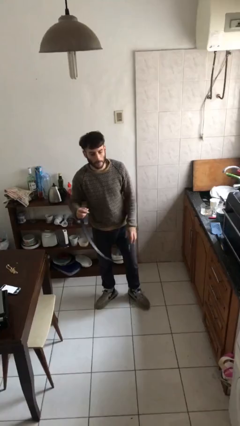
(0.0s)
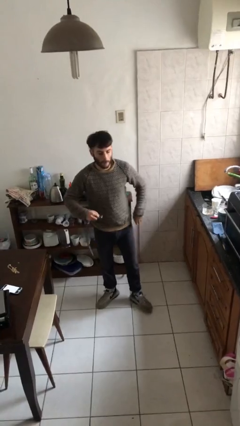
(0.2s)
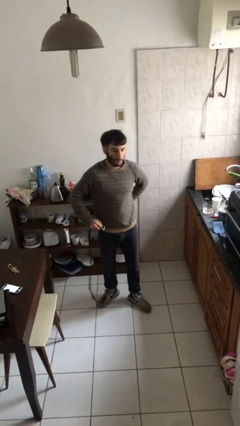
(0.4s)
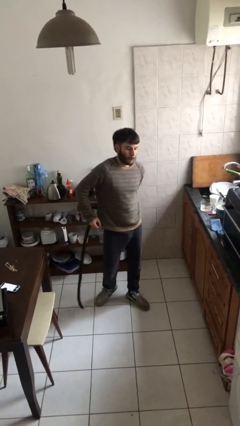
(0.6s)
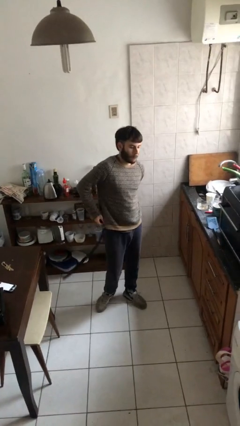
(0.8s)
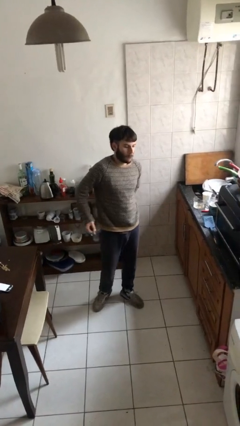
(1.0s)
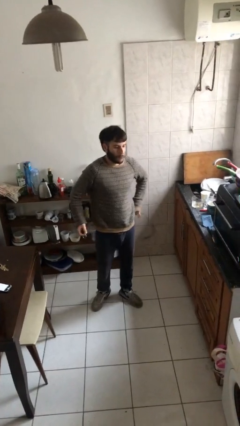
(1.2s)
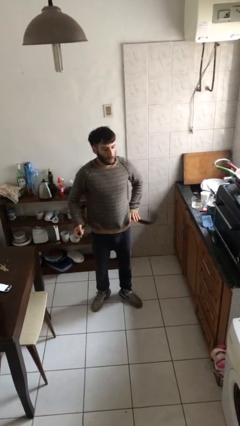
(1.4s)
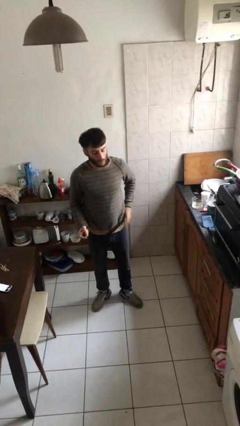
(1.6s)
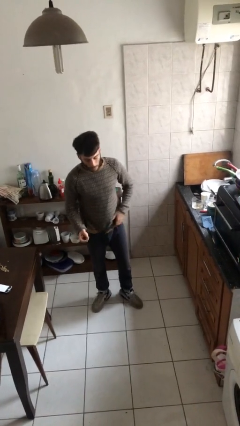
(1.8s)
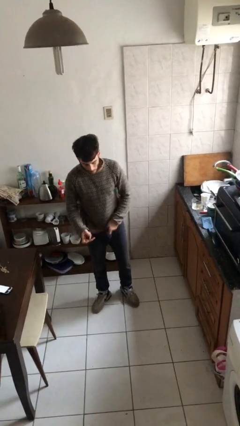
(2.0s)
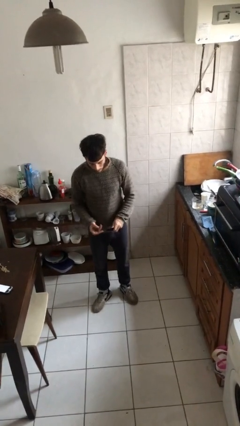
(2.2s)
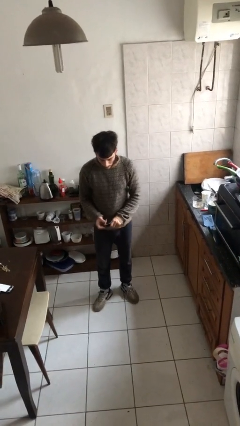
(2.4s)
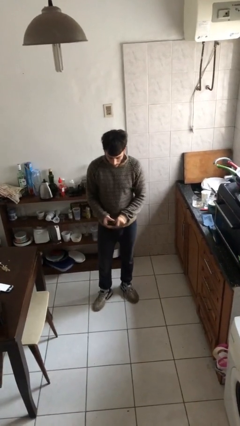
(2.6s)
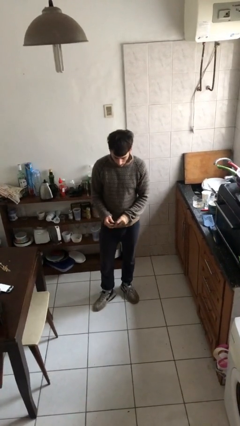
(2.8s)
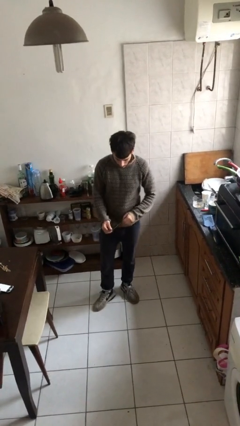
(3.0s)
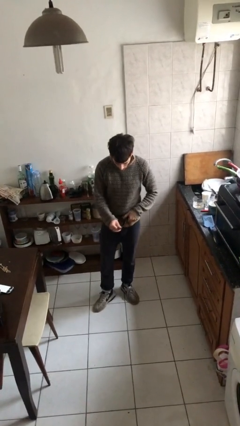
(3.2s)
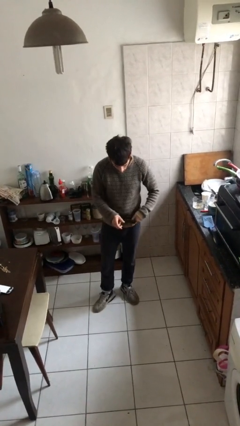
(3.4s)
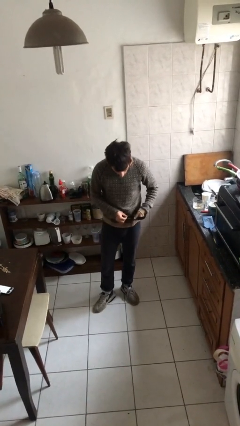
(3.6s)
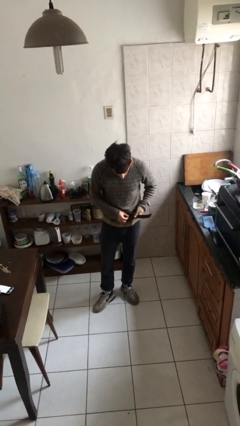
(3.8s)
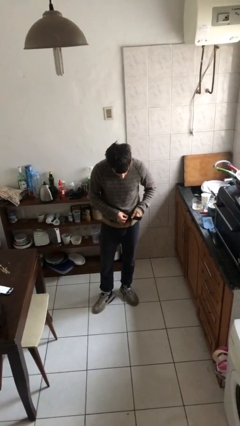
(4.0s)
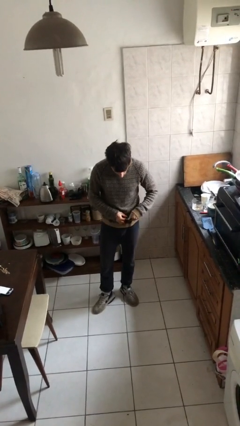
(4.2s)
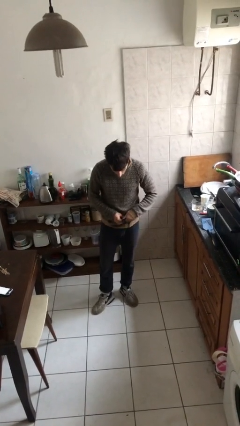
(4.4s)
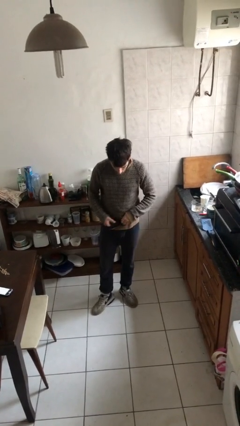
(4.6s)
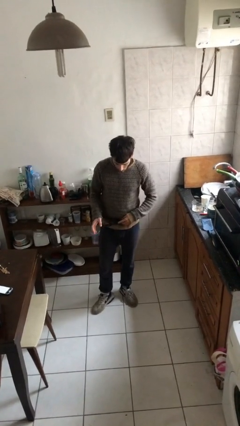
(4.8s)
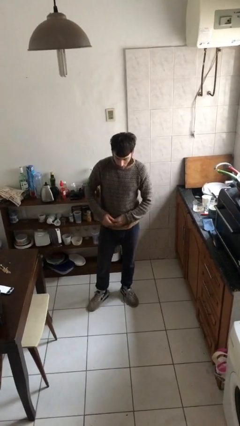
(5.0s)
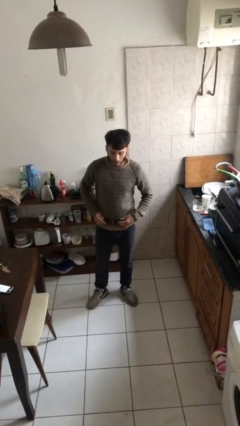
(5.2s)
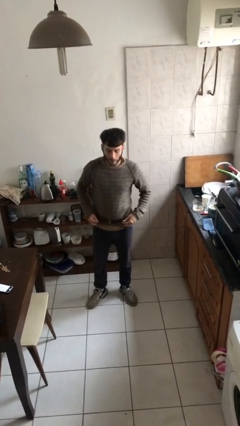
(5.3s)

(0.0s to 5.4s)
person puts on belt

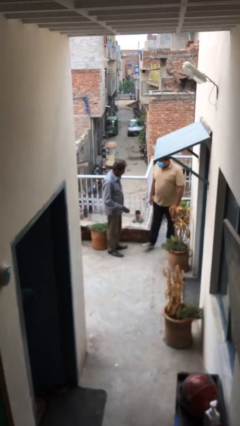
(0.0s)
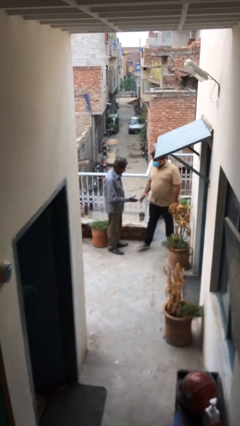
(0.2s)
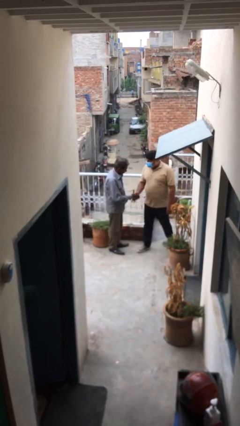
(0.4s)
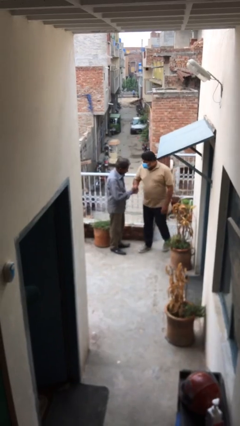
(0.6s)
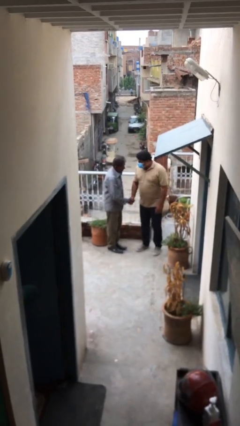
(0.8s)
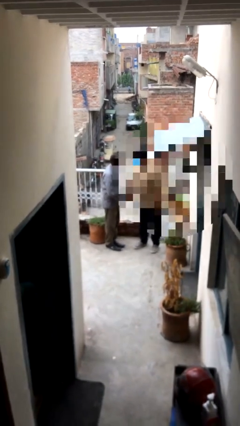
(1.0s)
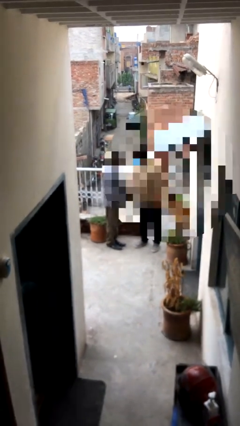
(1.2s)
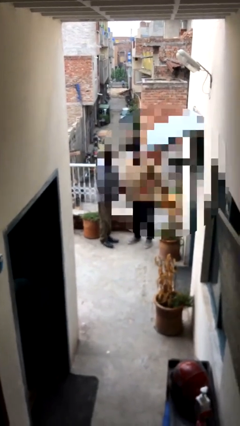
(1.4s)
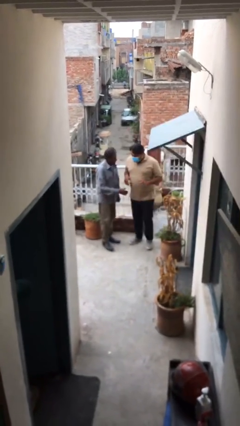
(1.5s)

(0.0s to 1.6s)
person shakes hand

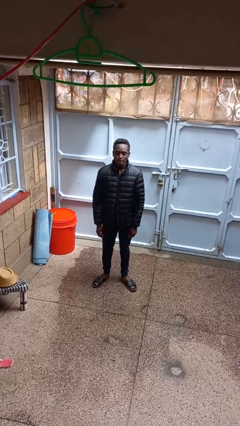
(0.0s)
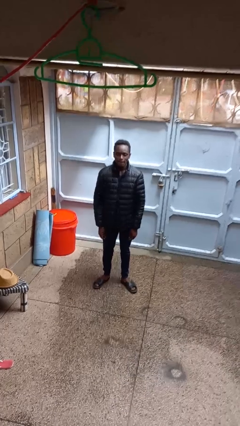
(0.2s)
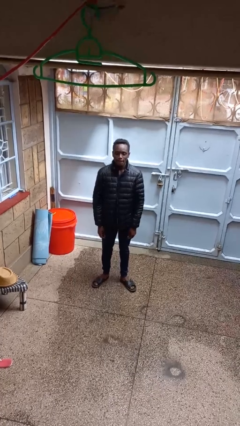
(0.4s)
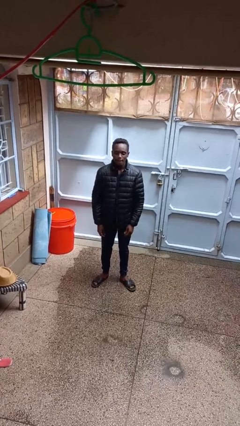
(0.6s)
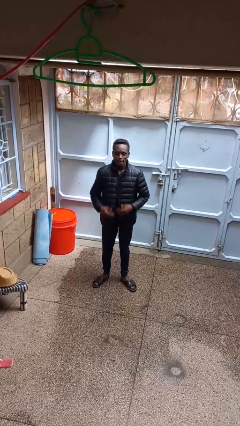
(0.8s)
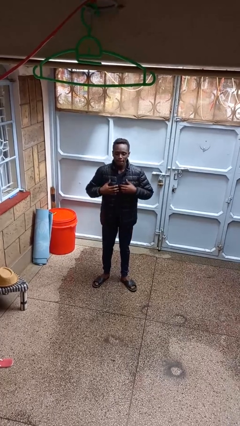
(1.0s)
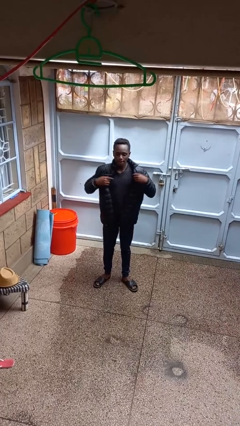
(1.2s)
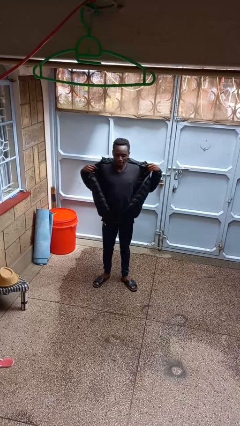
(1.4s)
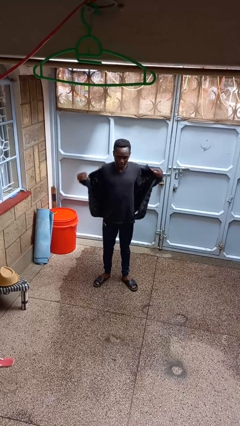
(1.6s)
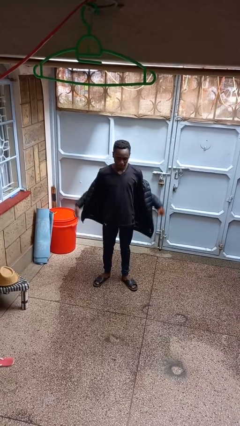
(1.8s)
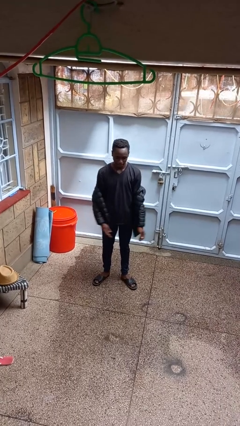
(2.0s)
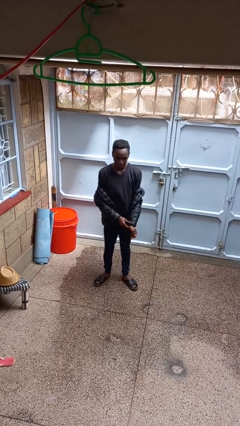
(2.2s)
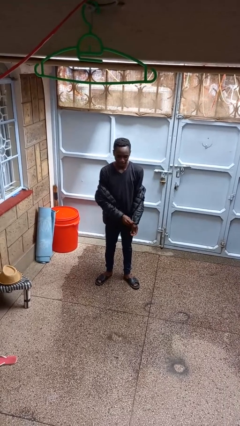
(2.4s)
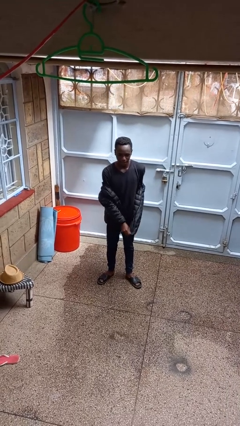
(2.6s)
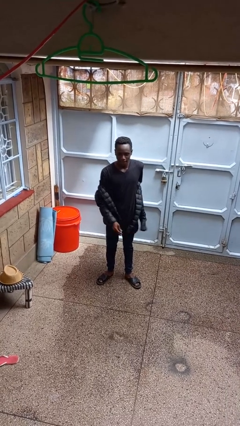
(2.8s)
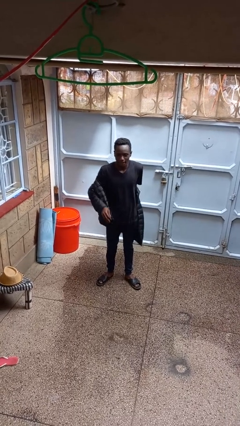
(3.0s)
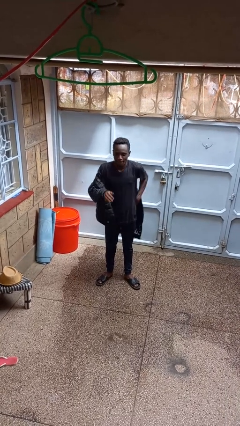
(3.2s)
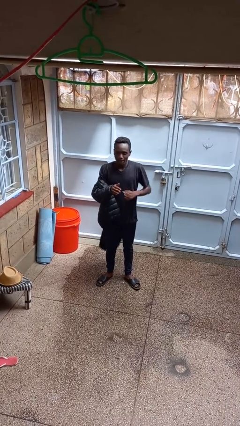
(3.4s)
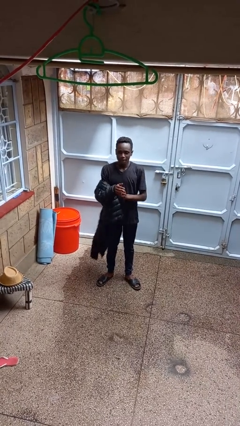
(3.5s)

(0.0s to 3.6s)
person takes off jacket

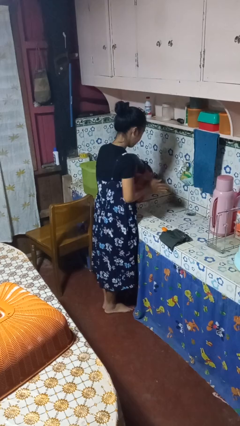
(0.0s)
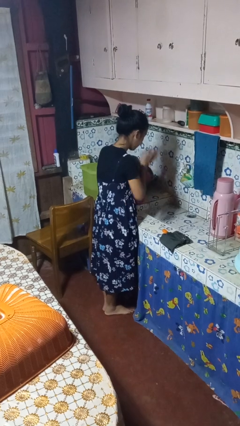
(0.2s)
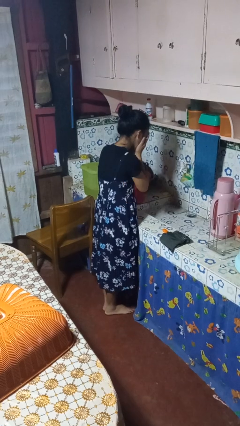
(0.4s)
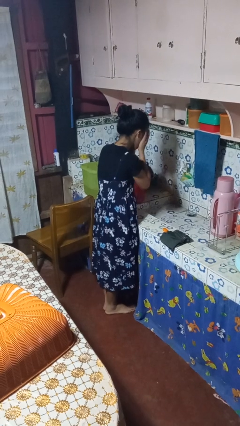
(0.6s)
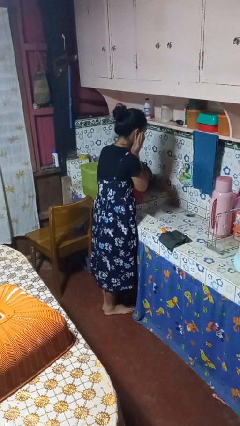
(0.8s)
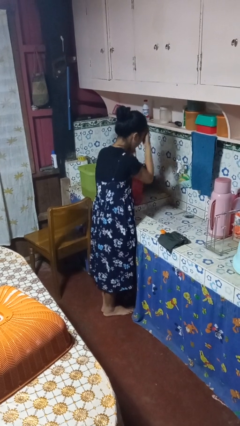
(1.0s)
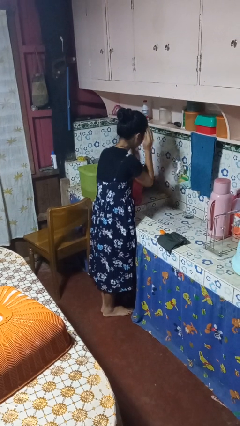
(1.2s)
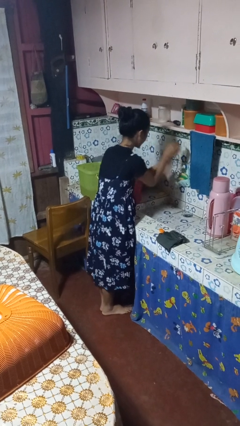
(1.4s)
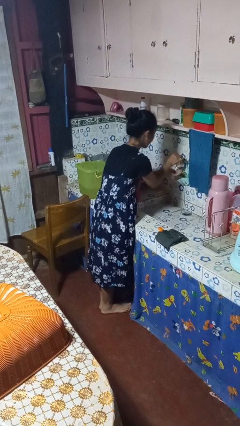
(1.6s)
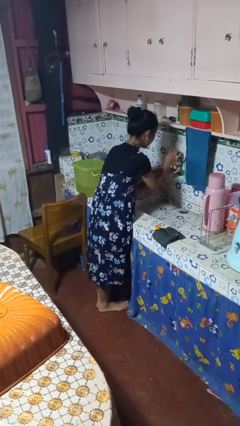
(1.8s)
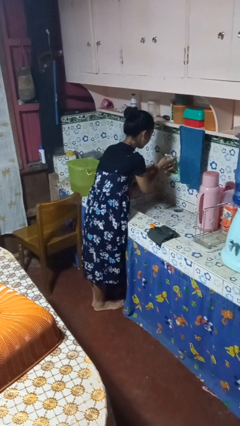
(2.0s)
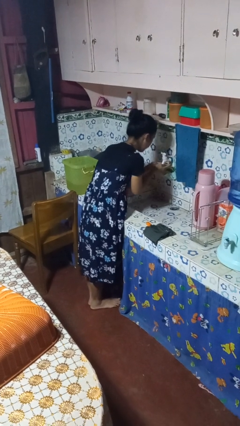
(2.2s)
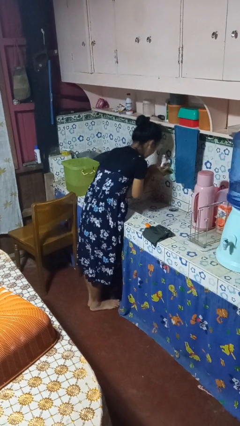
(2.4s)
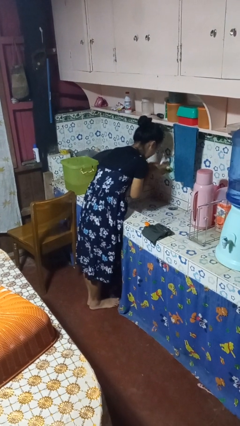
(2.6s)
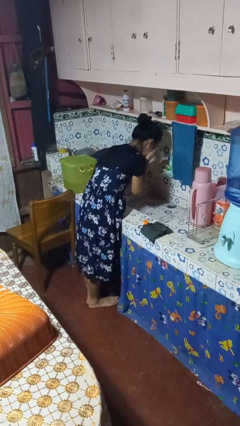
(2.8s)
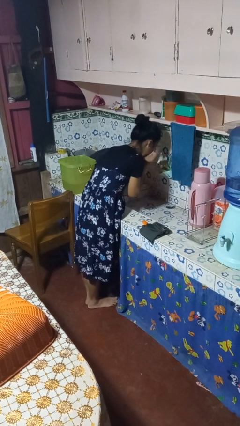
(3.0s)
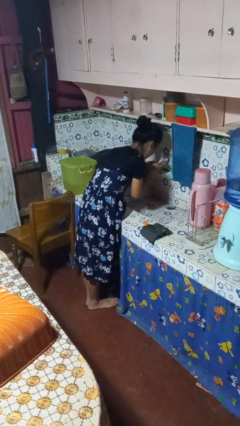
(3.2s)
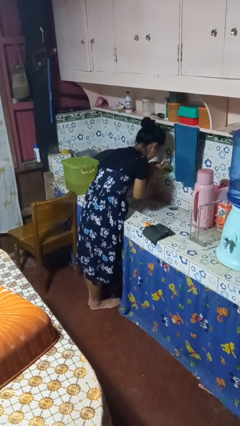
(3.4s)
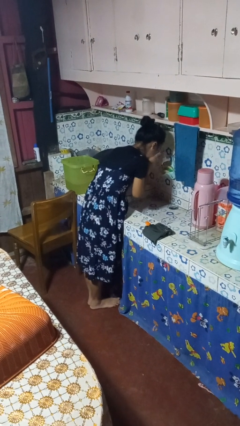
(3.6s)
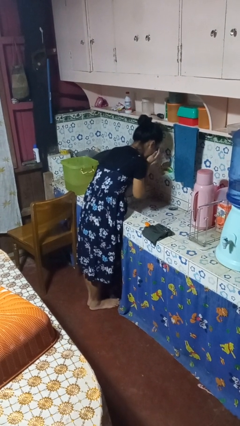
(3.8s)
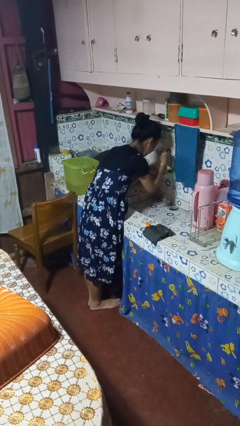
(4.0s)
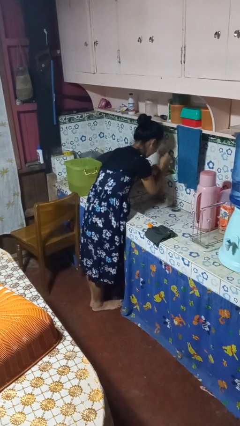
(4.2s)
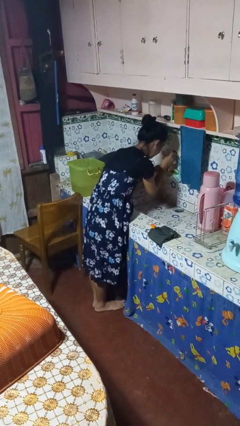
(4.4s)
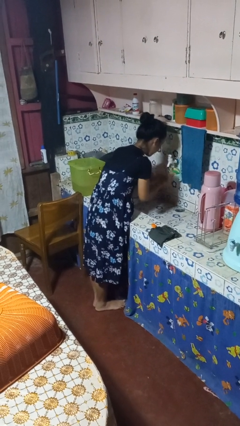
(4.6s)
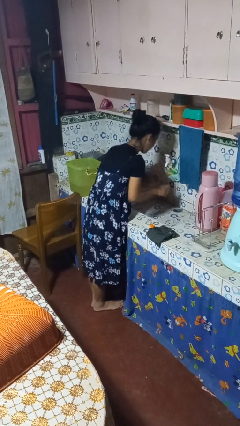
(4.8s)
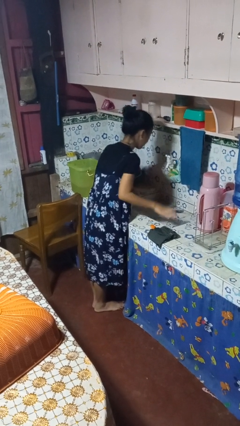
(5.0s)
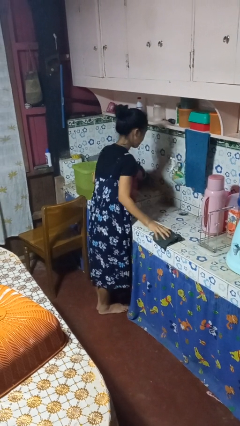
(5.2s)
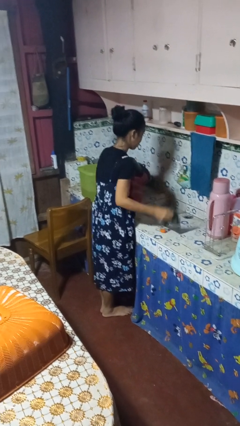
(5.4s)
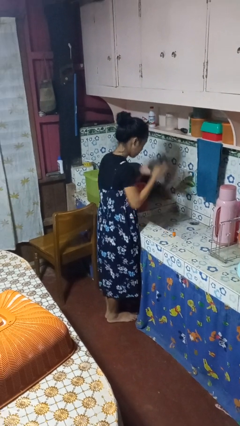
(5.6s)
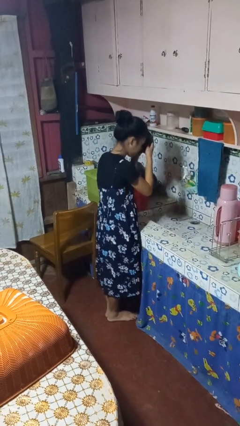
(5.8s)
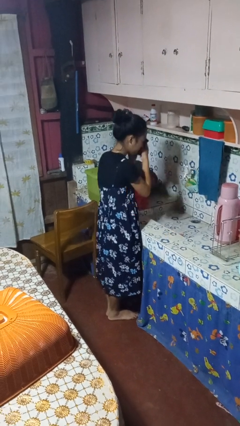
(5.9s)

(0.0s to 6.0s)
person washes face

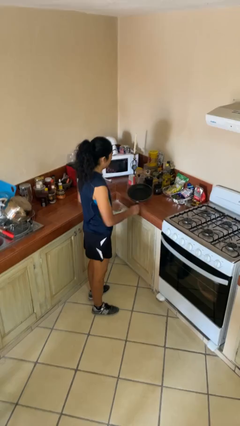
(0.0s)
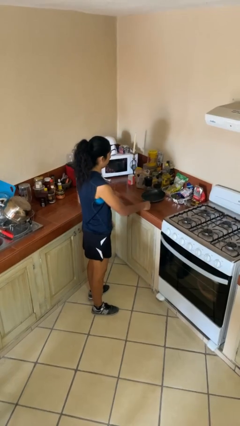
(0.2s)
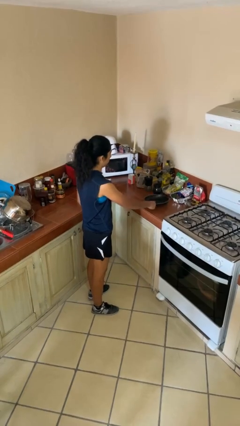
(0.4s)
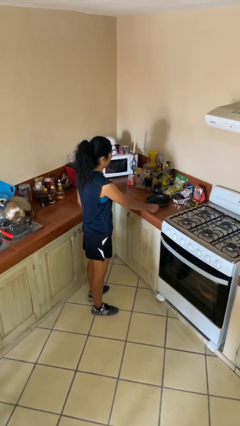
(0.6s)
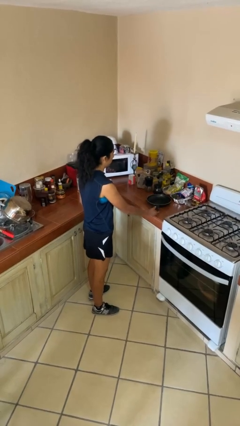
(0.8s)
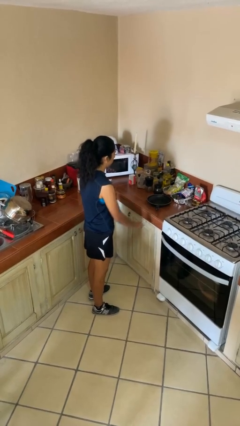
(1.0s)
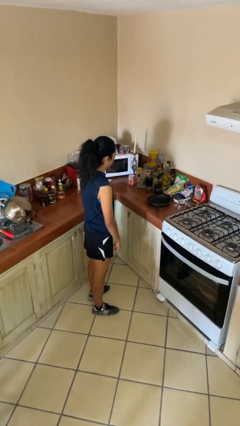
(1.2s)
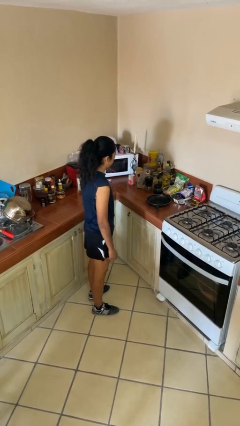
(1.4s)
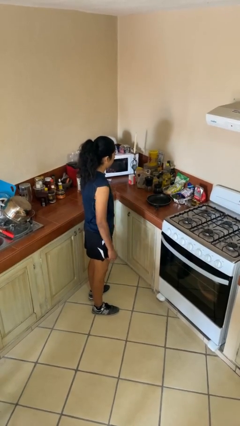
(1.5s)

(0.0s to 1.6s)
person puts down object on countertop
